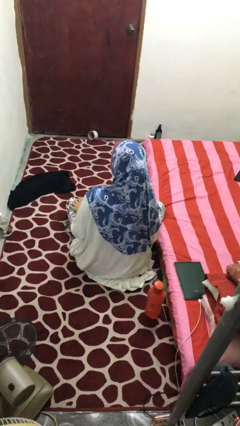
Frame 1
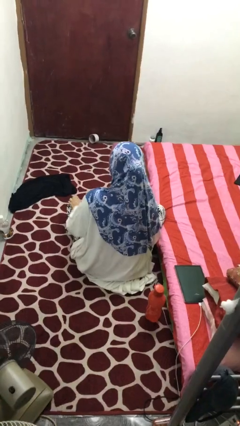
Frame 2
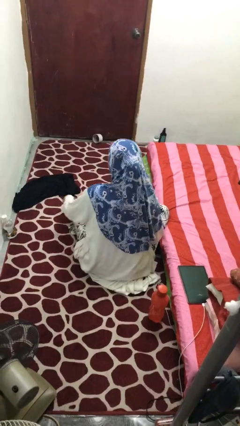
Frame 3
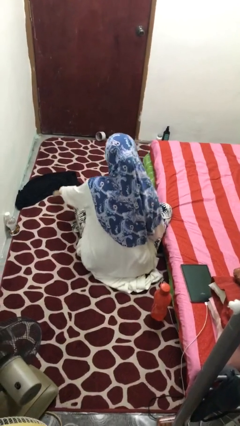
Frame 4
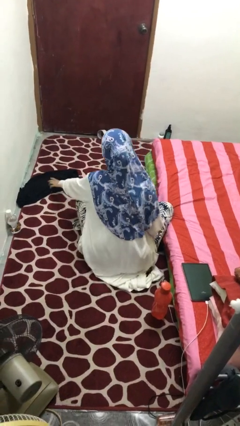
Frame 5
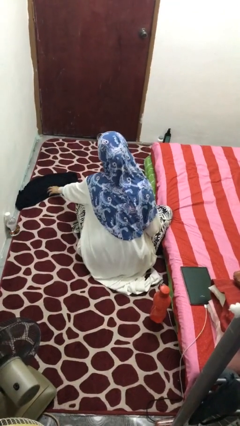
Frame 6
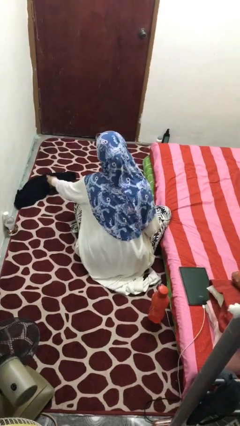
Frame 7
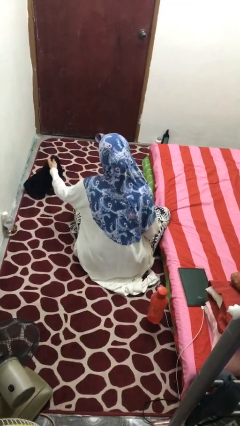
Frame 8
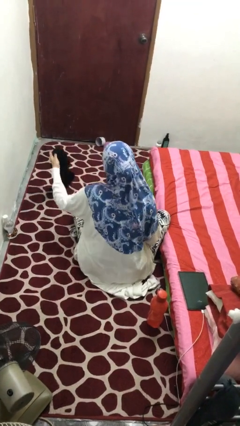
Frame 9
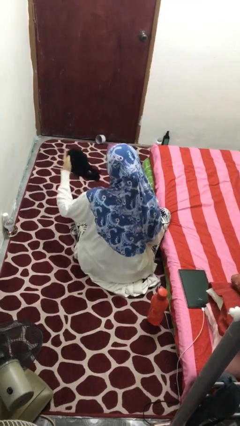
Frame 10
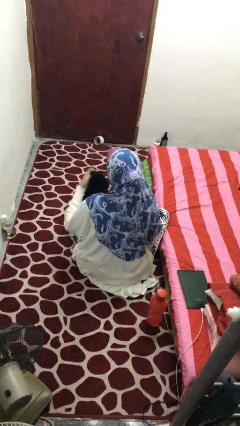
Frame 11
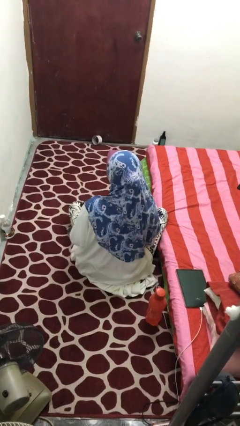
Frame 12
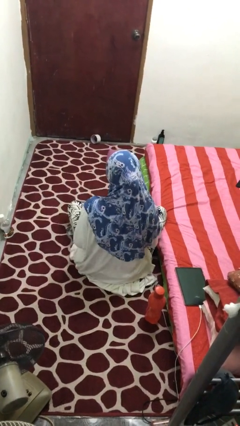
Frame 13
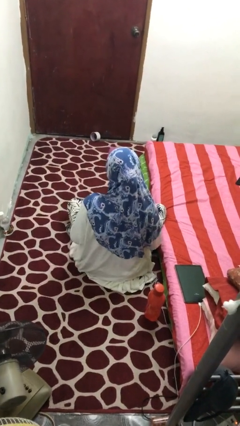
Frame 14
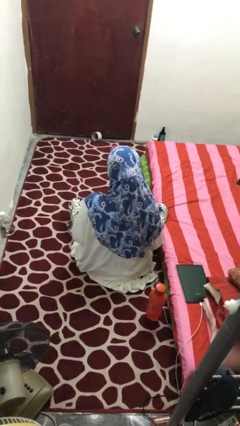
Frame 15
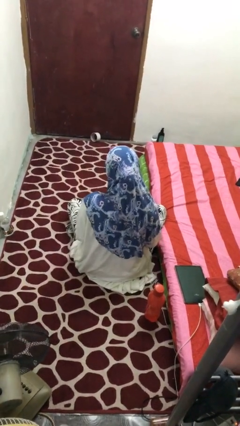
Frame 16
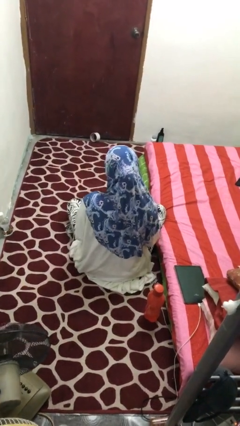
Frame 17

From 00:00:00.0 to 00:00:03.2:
person picks up object from floor

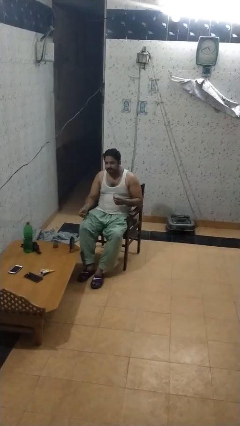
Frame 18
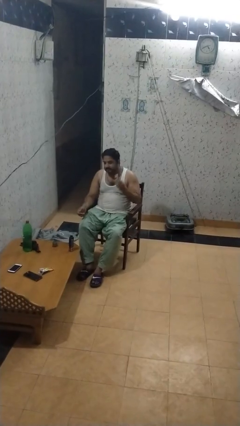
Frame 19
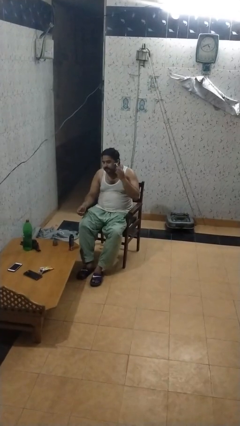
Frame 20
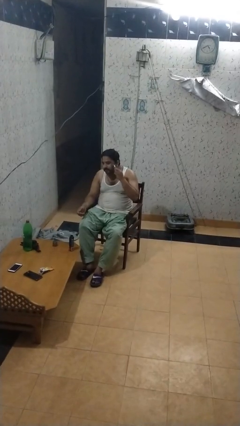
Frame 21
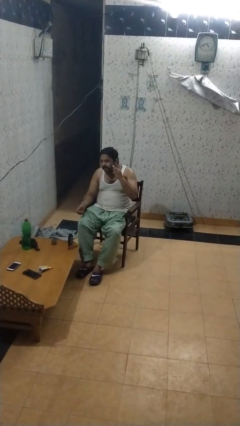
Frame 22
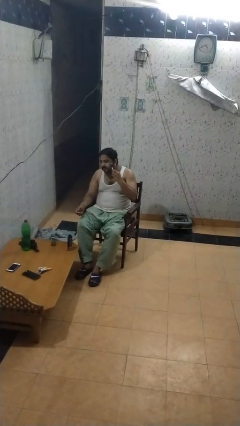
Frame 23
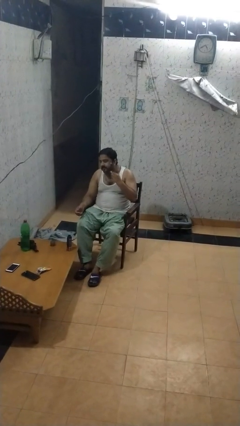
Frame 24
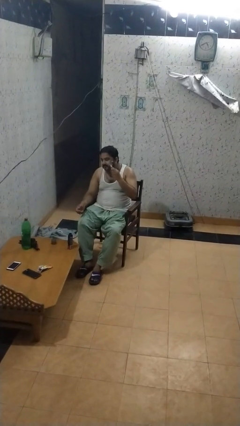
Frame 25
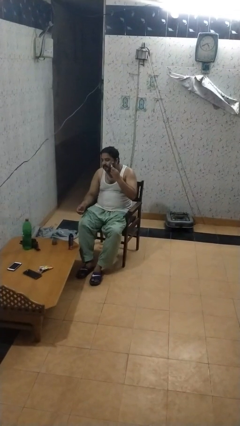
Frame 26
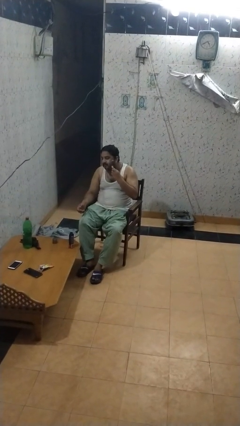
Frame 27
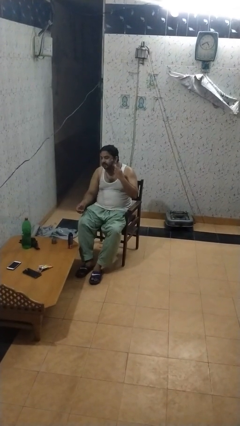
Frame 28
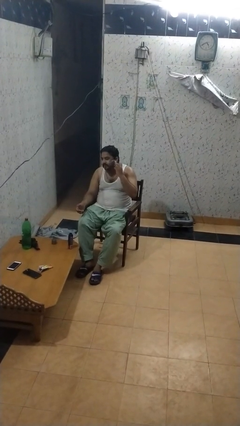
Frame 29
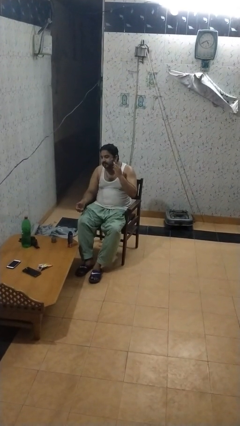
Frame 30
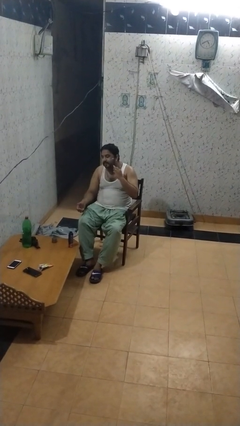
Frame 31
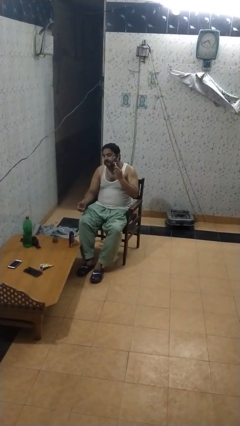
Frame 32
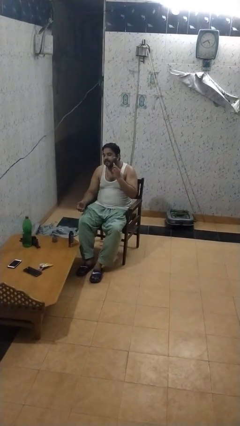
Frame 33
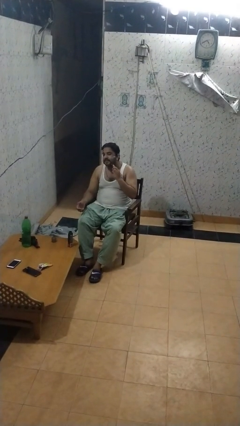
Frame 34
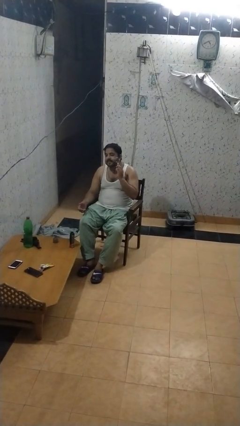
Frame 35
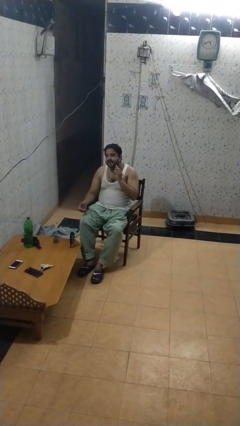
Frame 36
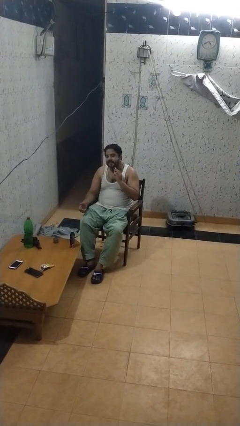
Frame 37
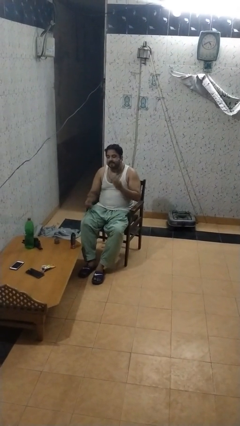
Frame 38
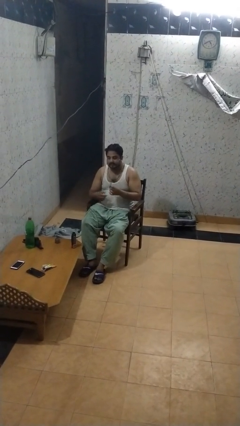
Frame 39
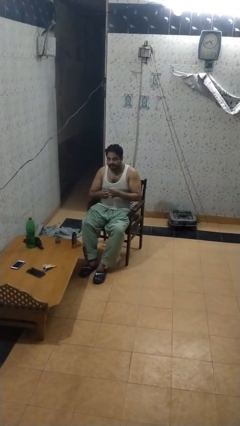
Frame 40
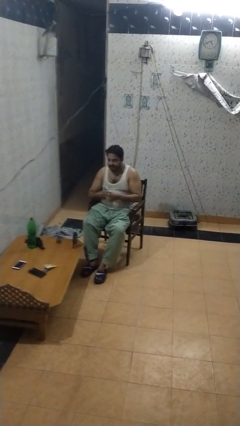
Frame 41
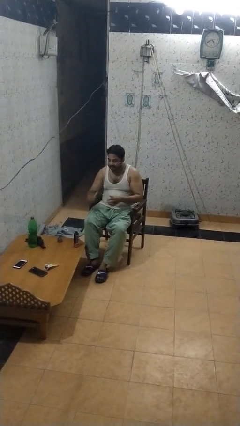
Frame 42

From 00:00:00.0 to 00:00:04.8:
person shaves face

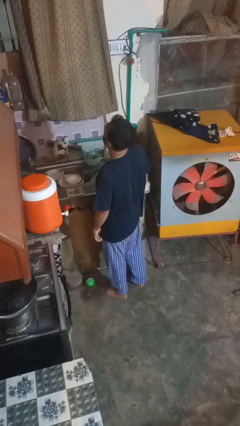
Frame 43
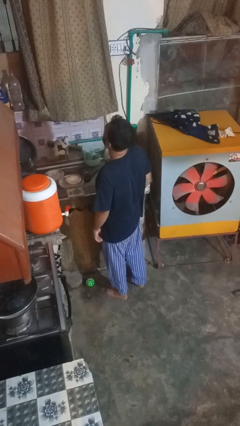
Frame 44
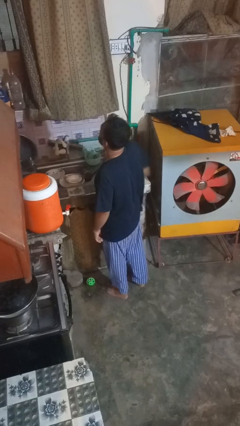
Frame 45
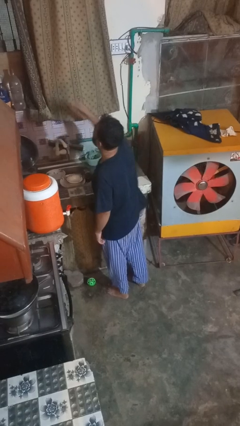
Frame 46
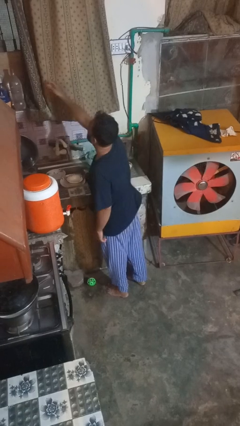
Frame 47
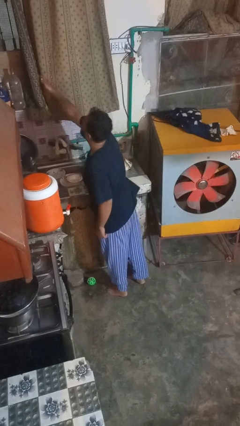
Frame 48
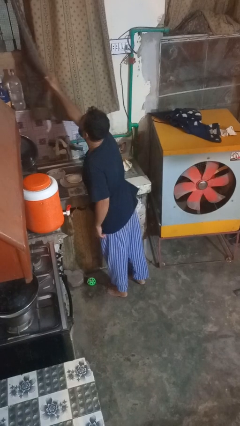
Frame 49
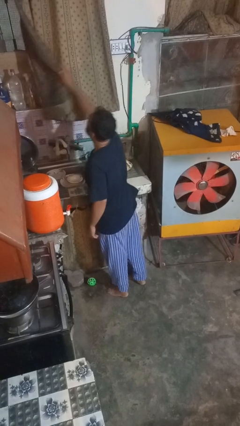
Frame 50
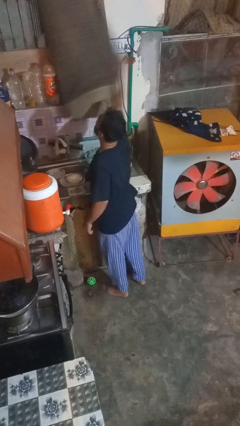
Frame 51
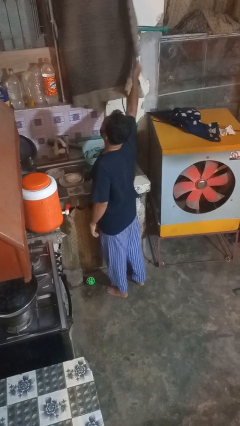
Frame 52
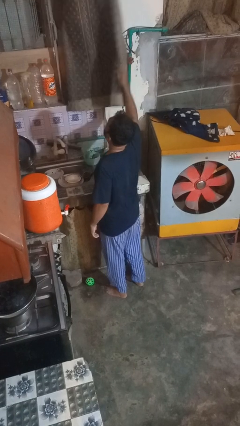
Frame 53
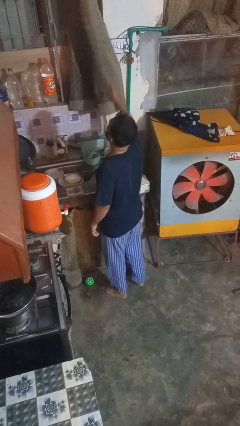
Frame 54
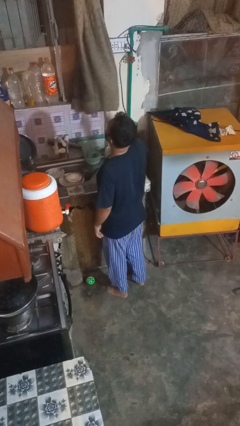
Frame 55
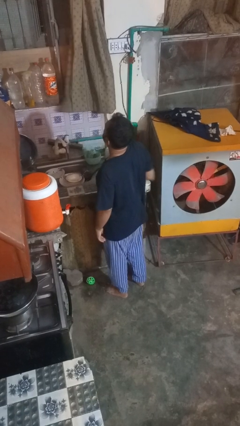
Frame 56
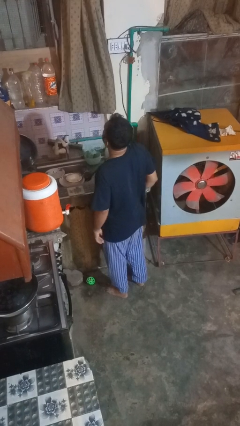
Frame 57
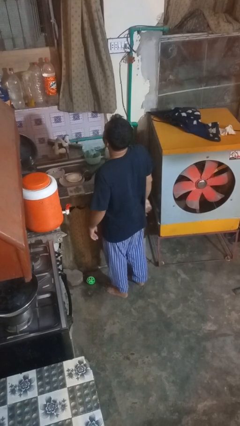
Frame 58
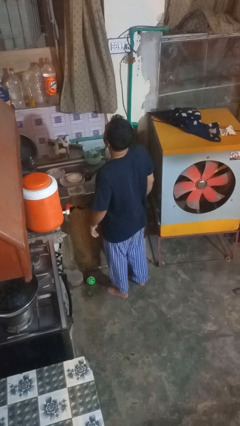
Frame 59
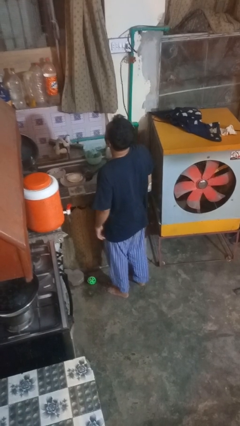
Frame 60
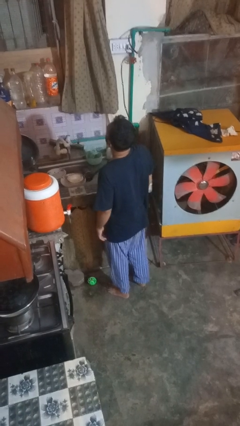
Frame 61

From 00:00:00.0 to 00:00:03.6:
person opens curtains

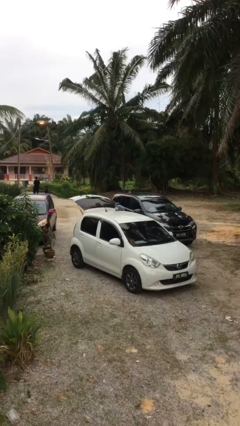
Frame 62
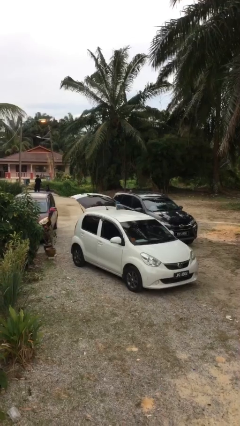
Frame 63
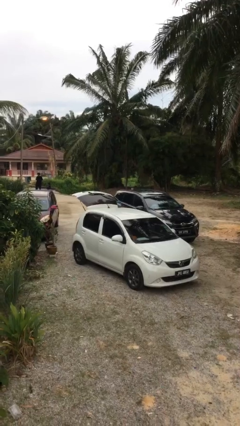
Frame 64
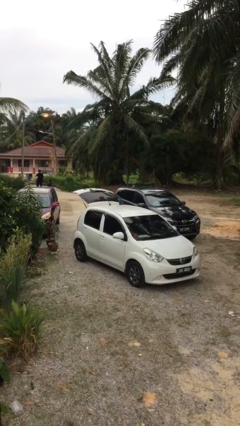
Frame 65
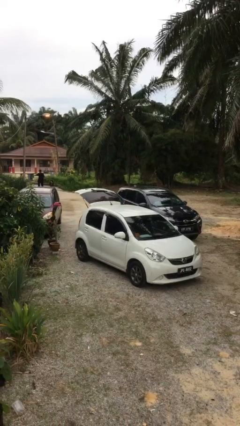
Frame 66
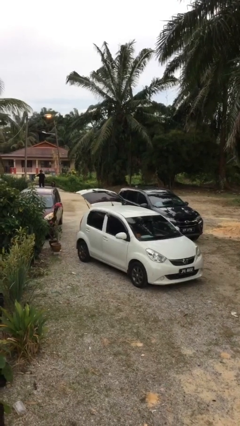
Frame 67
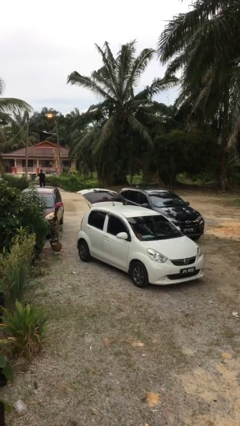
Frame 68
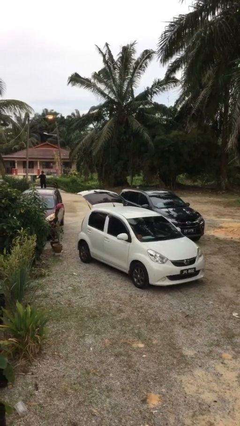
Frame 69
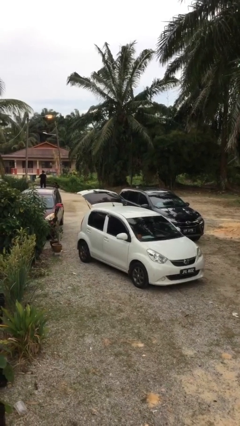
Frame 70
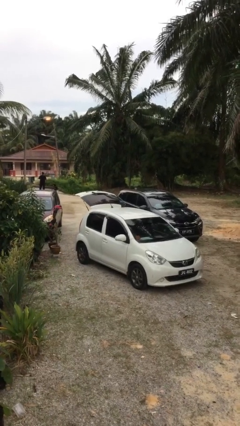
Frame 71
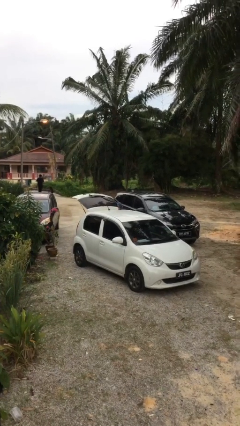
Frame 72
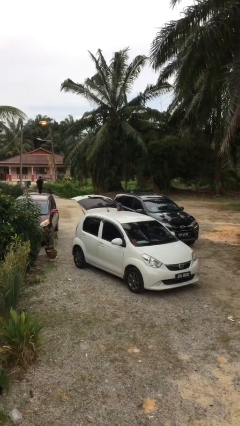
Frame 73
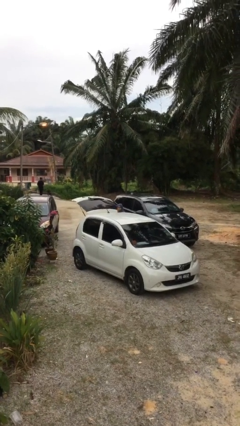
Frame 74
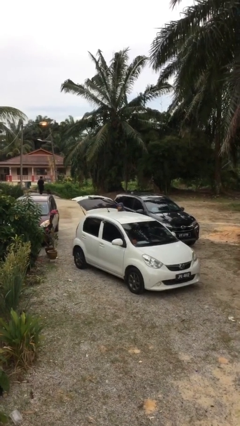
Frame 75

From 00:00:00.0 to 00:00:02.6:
person loads car

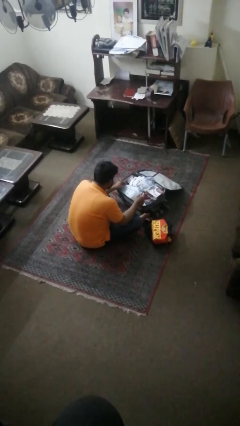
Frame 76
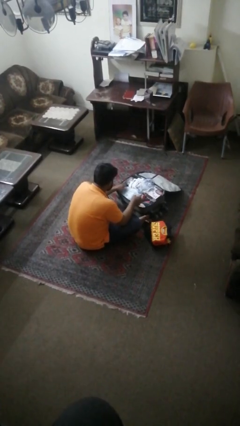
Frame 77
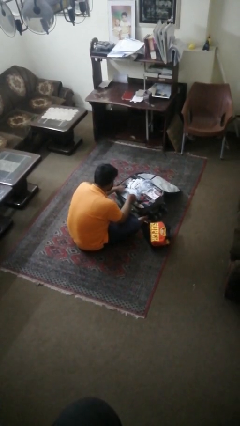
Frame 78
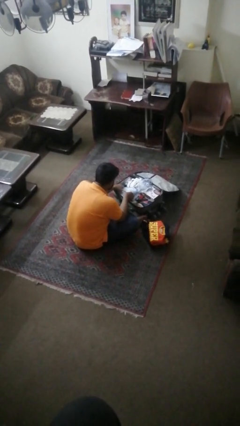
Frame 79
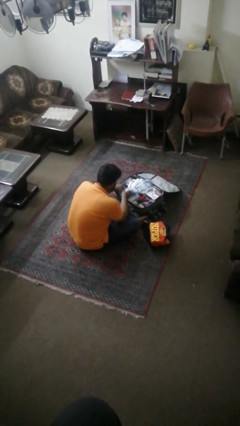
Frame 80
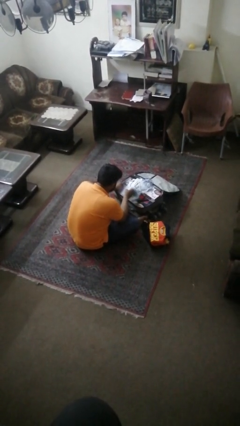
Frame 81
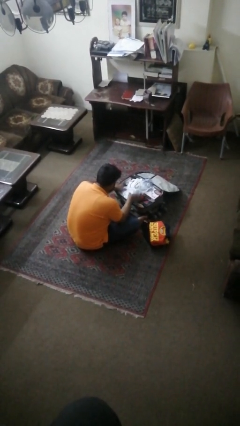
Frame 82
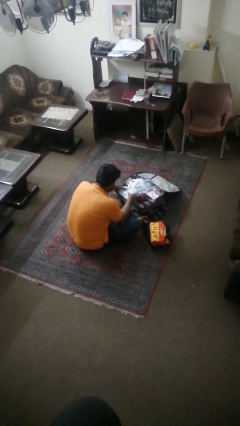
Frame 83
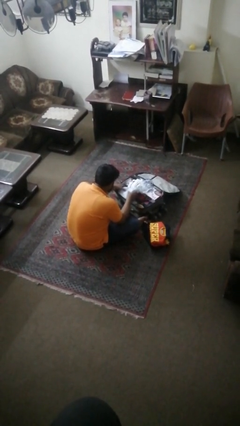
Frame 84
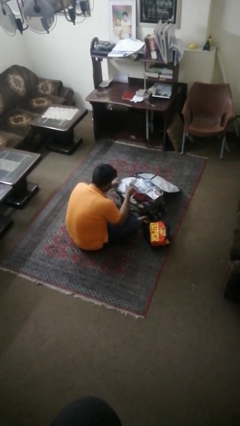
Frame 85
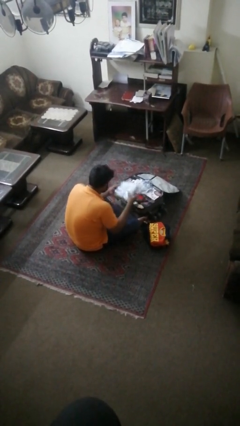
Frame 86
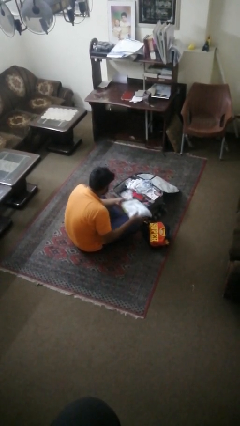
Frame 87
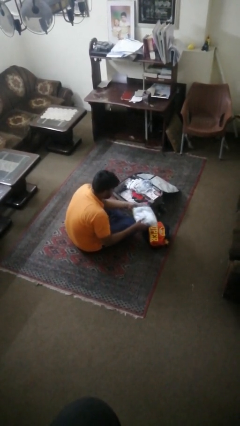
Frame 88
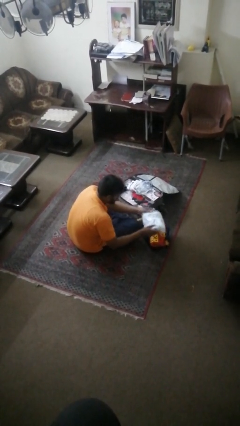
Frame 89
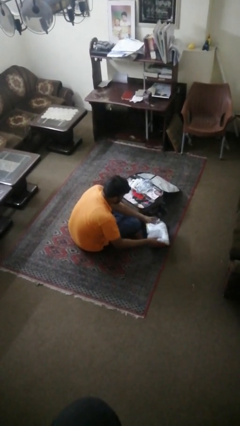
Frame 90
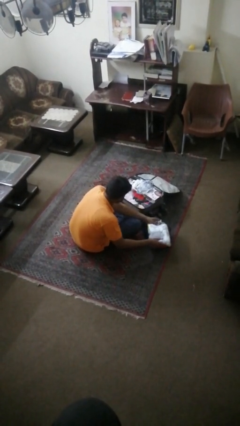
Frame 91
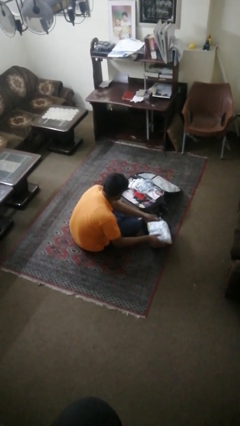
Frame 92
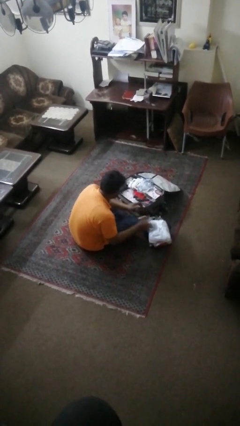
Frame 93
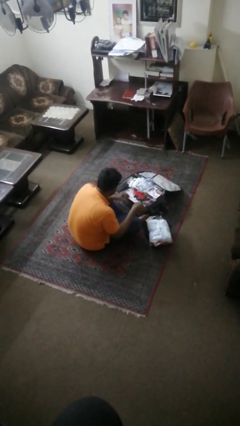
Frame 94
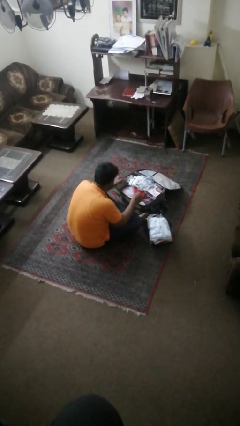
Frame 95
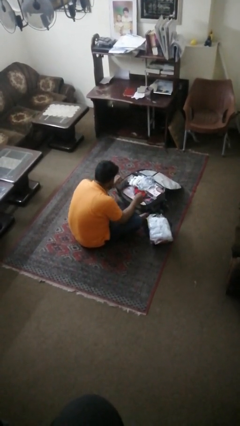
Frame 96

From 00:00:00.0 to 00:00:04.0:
person unloads clothes from suitcase
